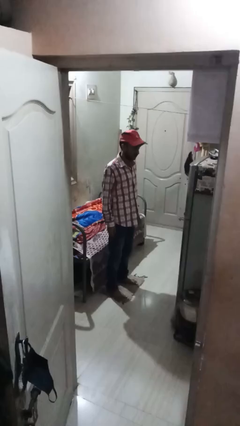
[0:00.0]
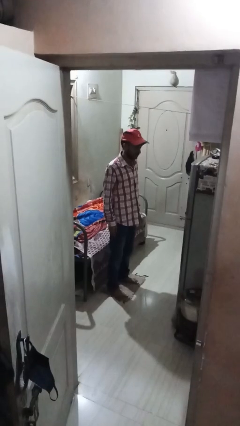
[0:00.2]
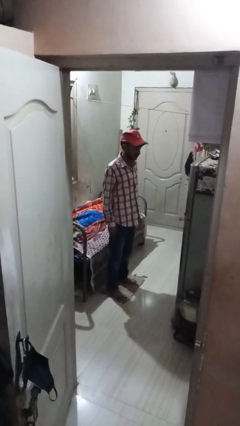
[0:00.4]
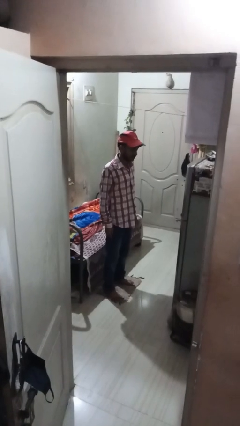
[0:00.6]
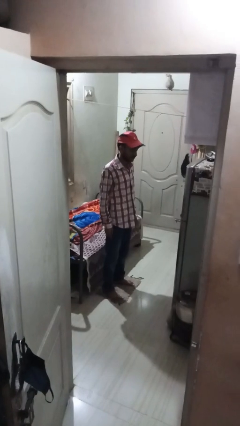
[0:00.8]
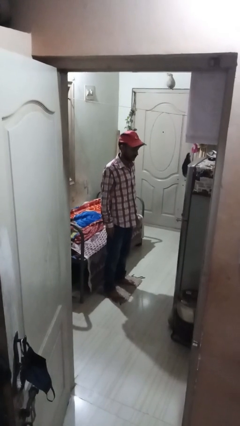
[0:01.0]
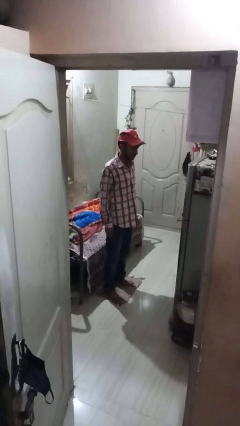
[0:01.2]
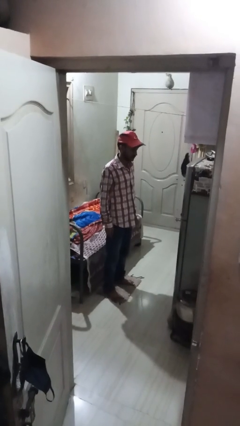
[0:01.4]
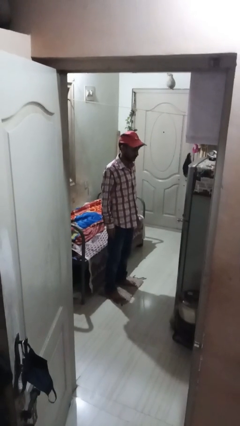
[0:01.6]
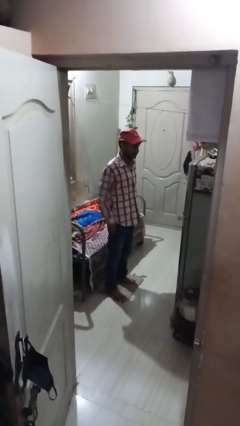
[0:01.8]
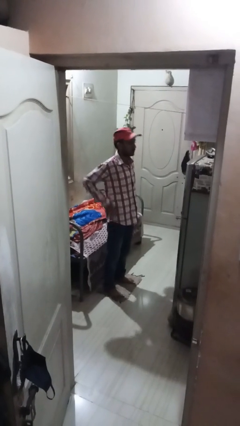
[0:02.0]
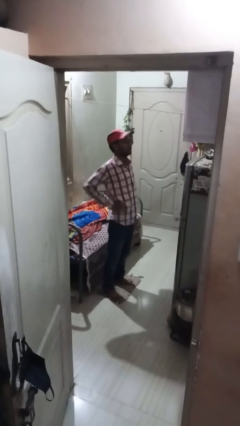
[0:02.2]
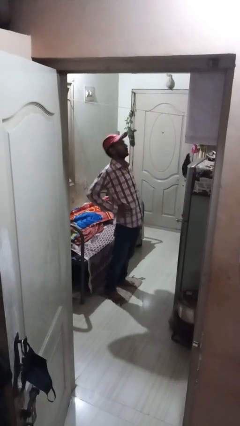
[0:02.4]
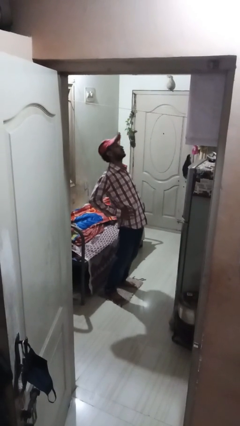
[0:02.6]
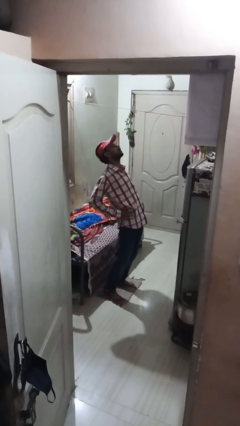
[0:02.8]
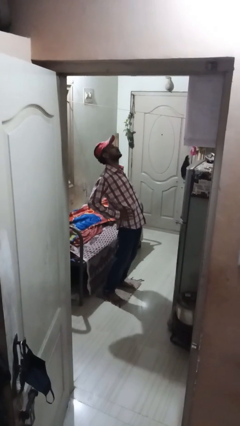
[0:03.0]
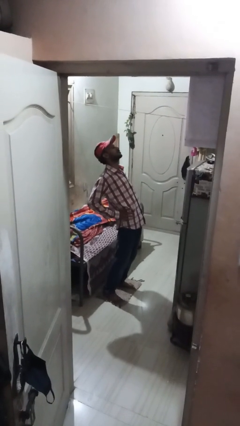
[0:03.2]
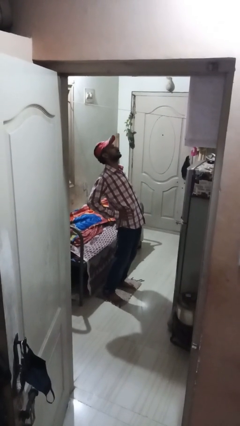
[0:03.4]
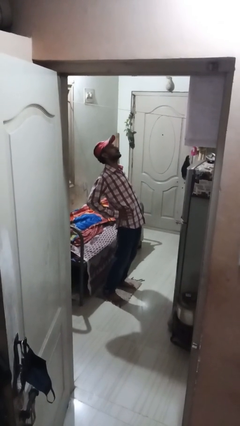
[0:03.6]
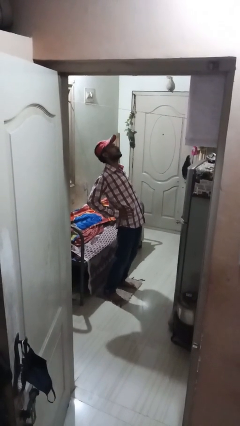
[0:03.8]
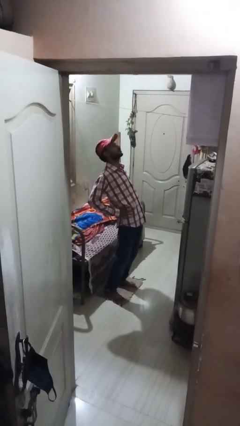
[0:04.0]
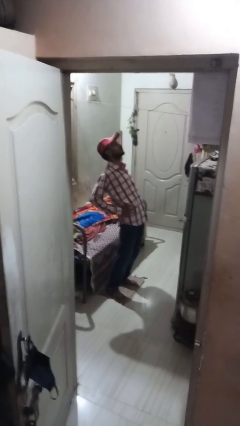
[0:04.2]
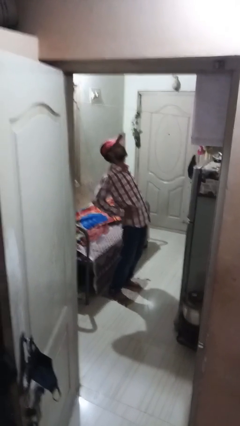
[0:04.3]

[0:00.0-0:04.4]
person stretches back

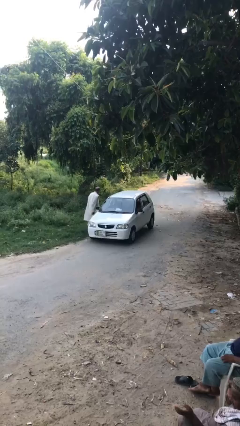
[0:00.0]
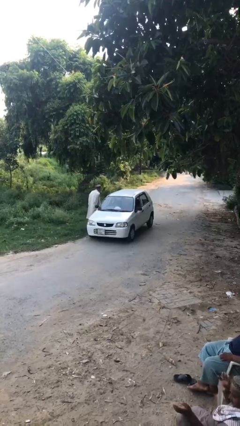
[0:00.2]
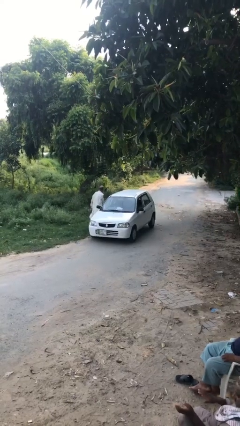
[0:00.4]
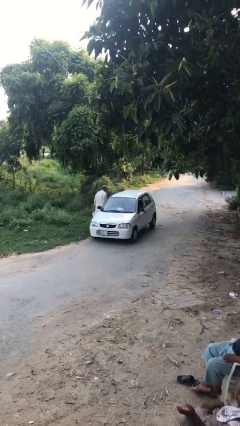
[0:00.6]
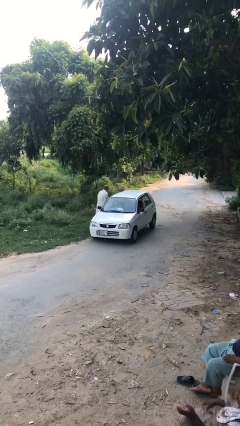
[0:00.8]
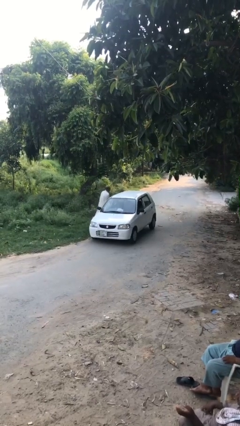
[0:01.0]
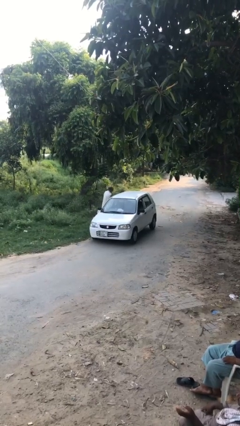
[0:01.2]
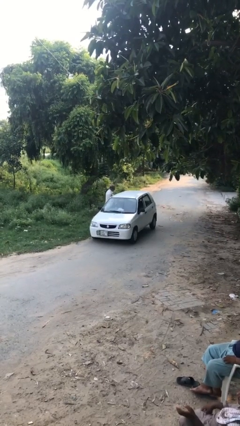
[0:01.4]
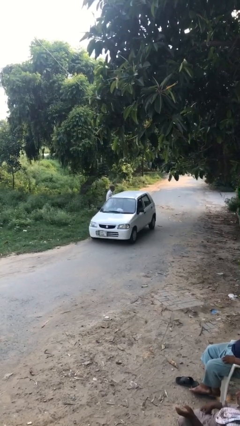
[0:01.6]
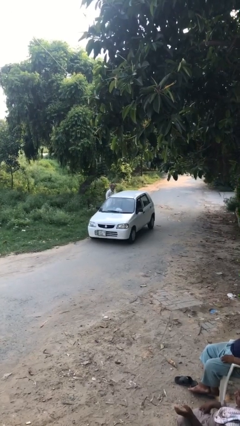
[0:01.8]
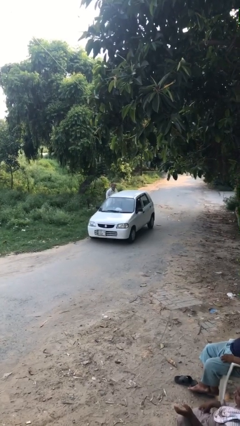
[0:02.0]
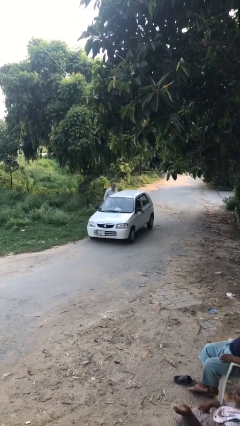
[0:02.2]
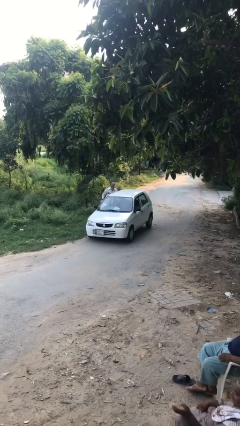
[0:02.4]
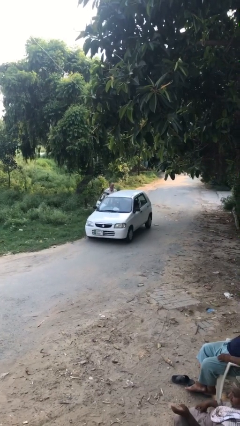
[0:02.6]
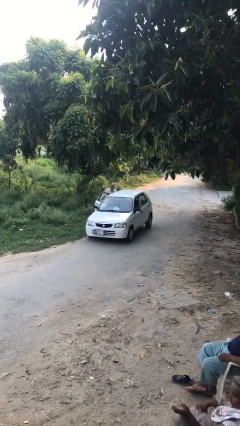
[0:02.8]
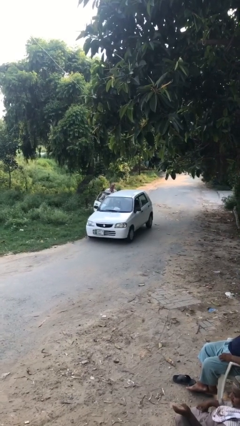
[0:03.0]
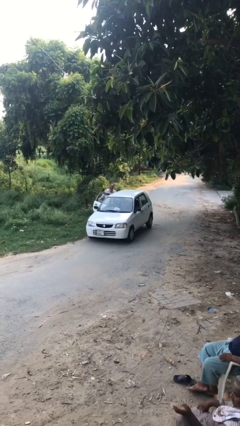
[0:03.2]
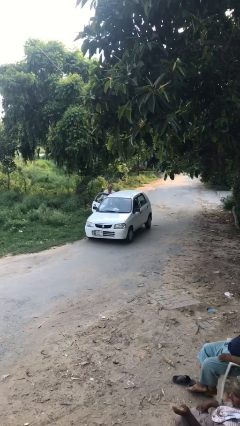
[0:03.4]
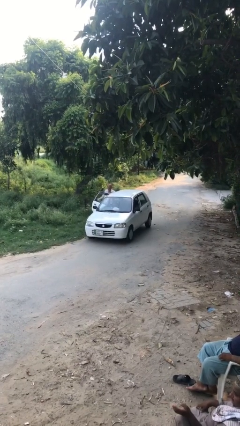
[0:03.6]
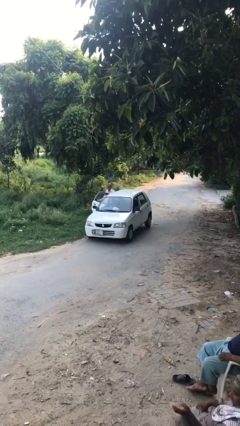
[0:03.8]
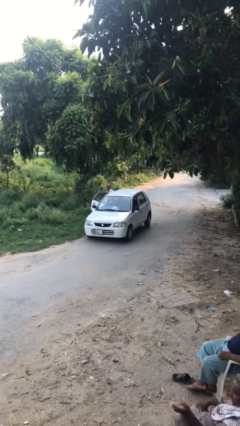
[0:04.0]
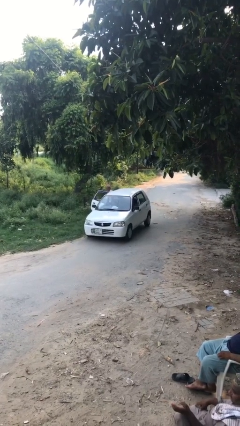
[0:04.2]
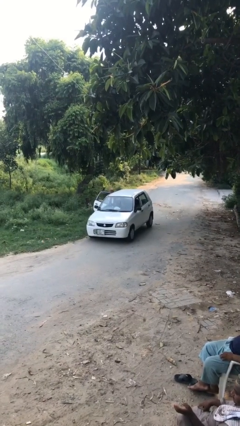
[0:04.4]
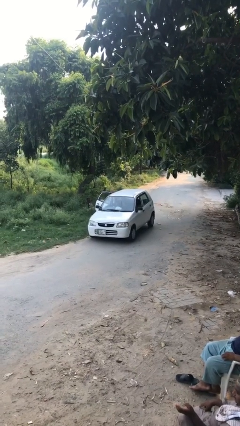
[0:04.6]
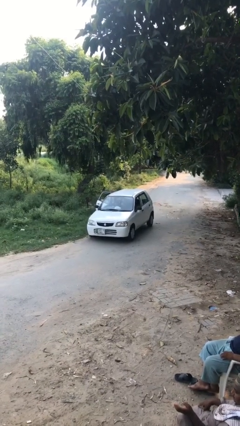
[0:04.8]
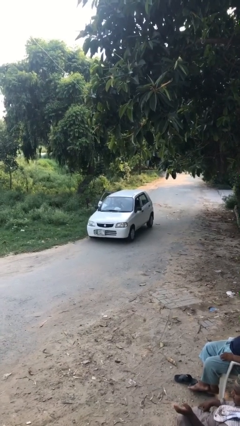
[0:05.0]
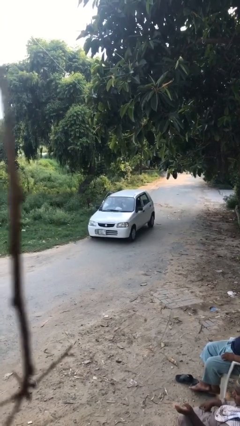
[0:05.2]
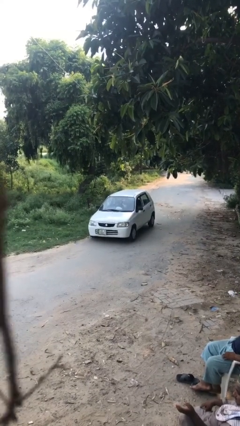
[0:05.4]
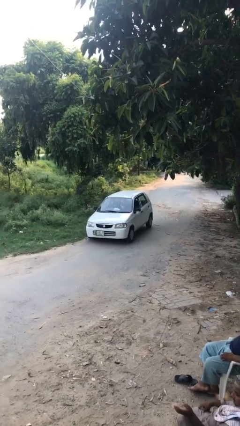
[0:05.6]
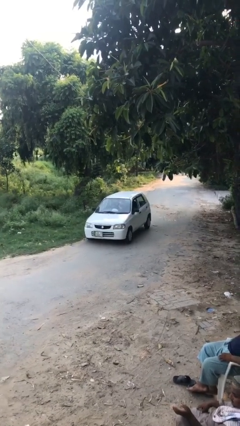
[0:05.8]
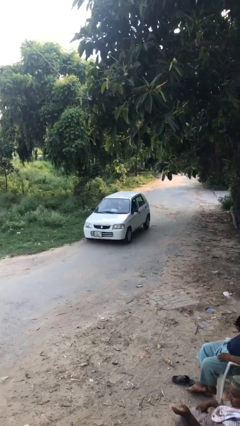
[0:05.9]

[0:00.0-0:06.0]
car picks up person

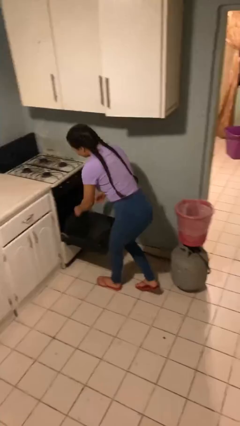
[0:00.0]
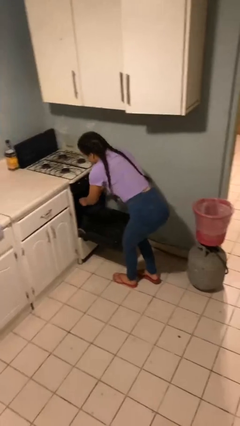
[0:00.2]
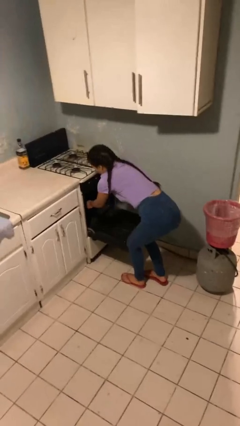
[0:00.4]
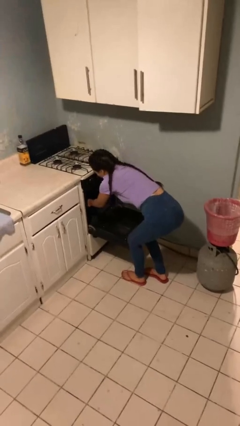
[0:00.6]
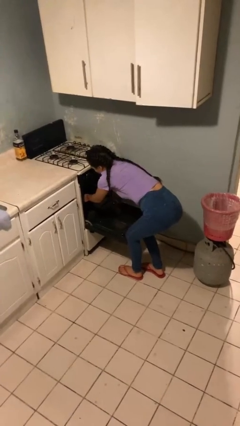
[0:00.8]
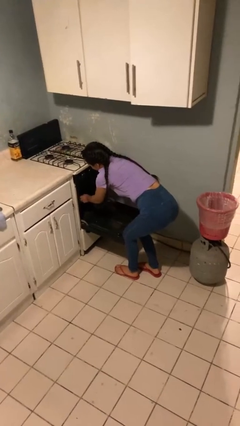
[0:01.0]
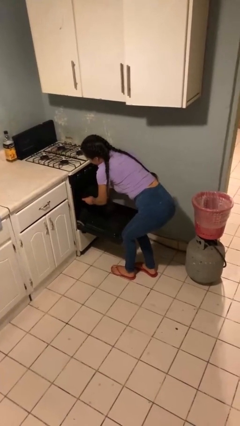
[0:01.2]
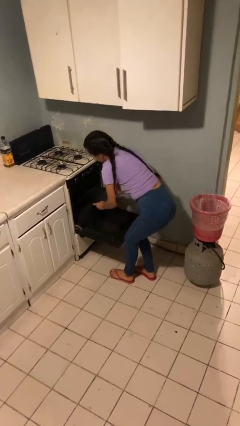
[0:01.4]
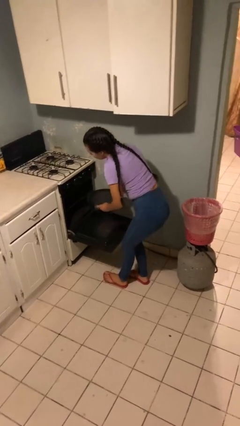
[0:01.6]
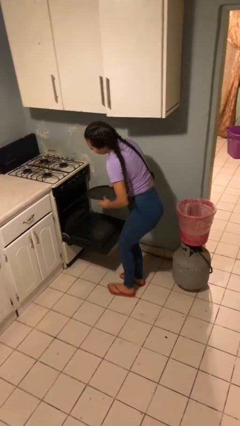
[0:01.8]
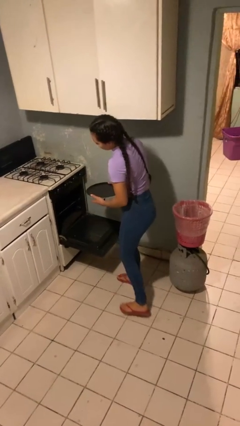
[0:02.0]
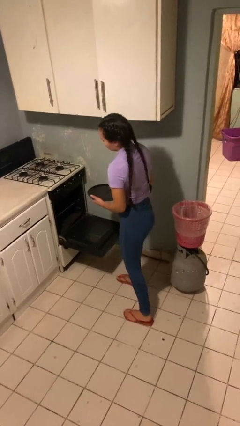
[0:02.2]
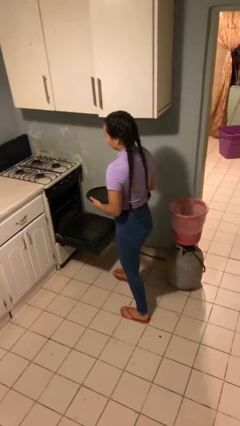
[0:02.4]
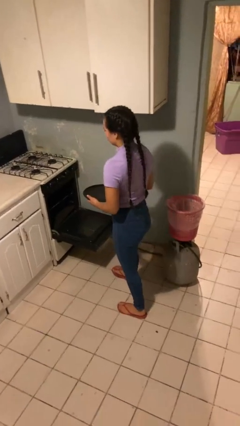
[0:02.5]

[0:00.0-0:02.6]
person takes object from toaster

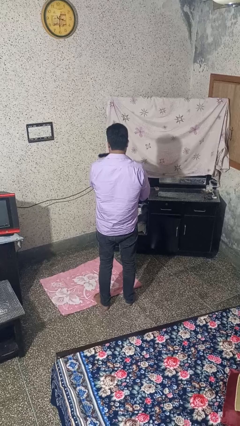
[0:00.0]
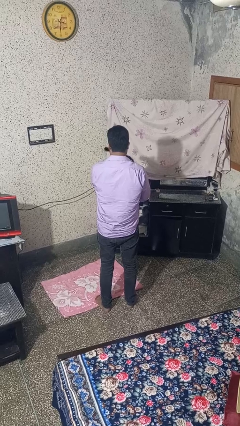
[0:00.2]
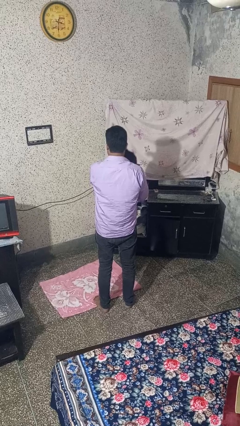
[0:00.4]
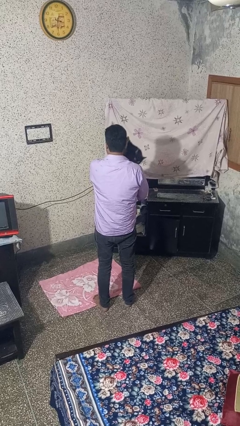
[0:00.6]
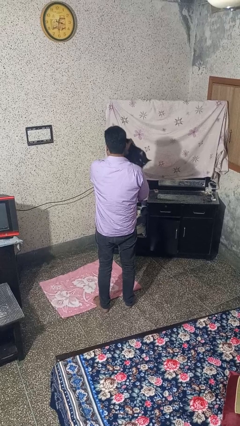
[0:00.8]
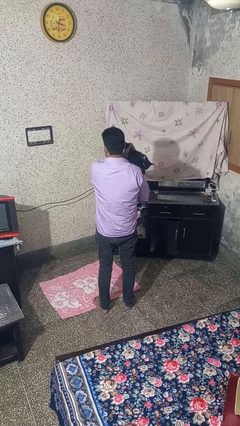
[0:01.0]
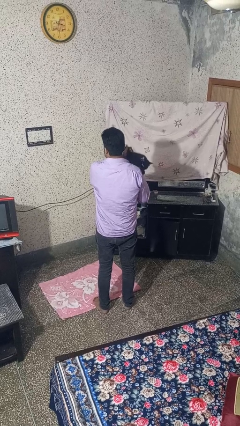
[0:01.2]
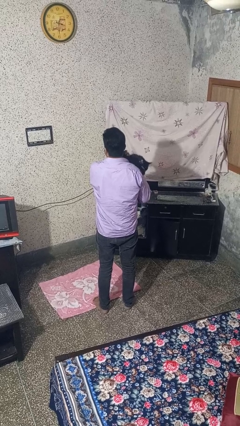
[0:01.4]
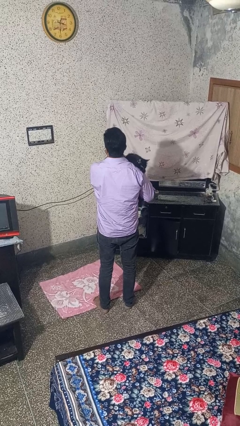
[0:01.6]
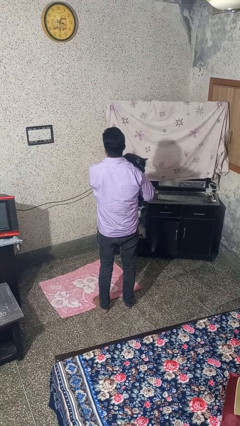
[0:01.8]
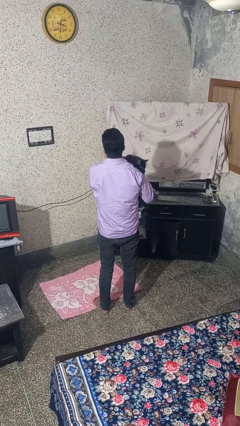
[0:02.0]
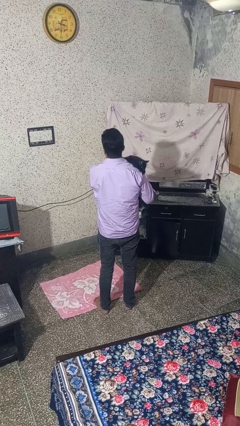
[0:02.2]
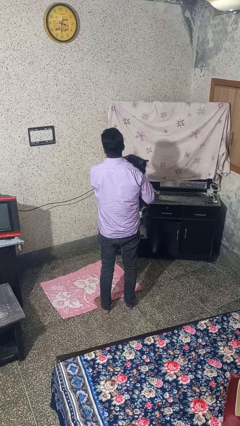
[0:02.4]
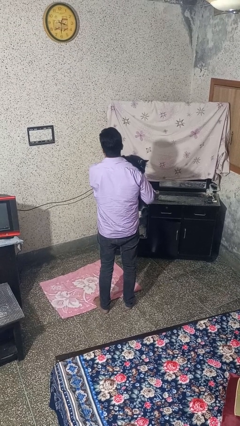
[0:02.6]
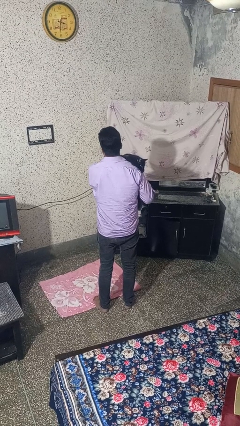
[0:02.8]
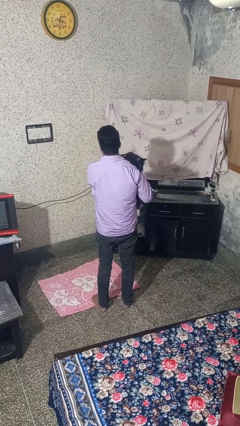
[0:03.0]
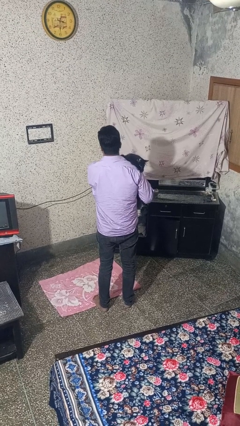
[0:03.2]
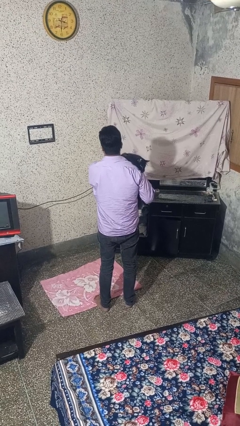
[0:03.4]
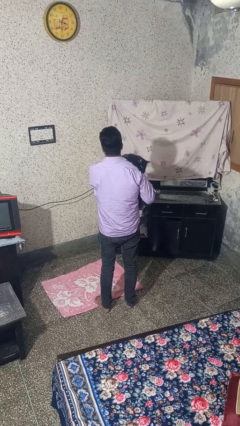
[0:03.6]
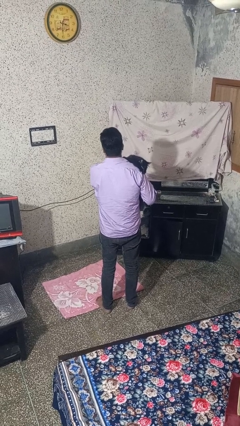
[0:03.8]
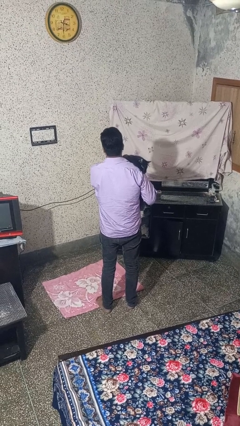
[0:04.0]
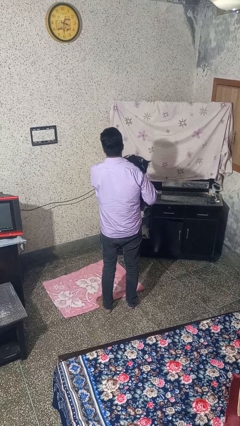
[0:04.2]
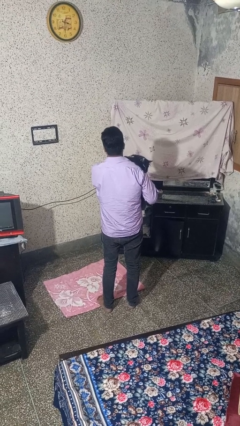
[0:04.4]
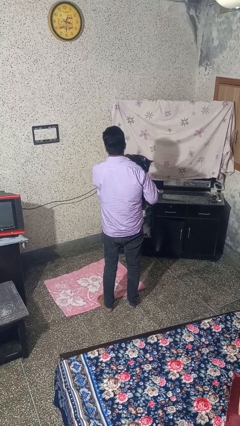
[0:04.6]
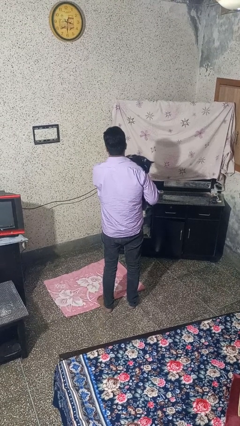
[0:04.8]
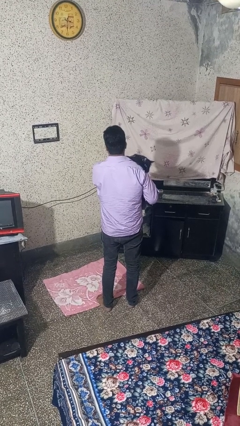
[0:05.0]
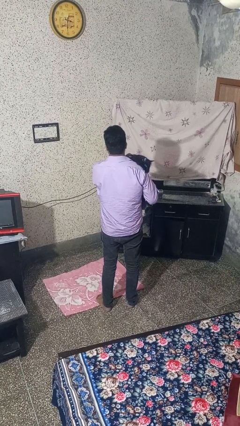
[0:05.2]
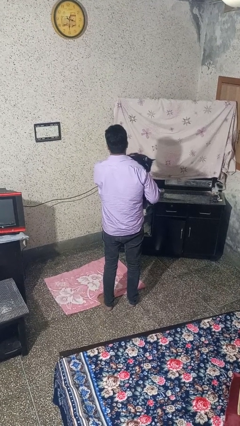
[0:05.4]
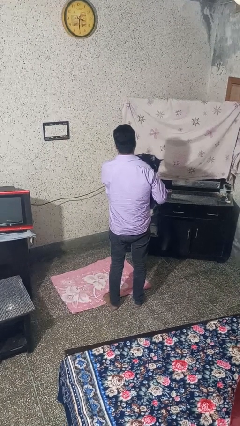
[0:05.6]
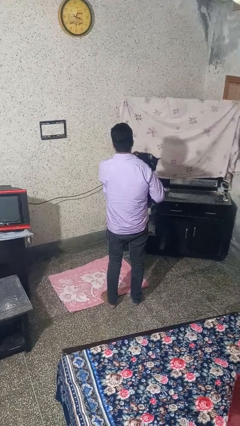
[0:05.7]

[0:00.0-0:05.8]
person hugs cat
